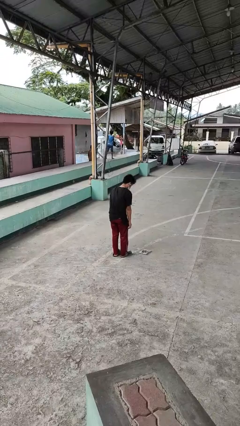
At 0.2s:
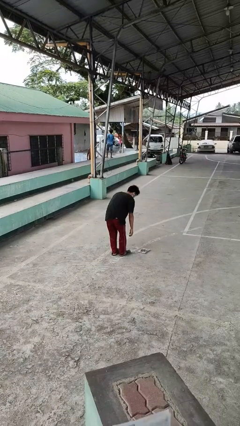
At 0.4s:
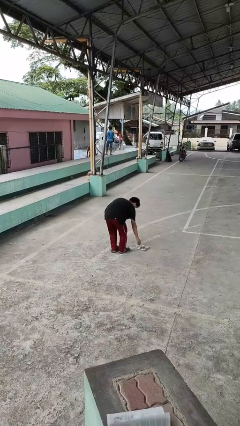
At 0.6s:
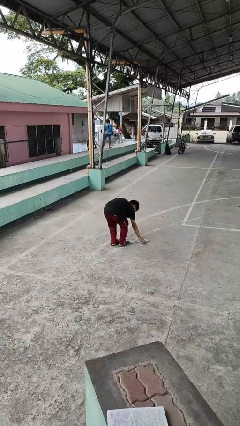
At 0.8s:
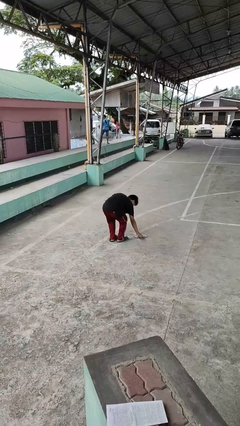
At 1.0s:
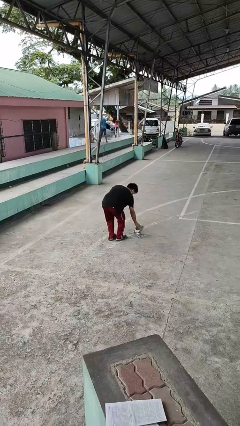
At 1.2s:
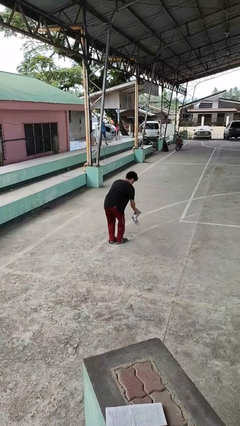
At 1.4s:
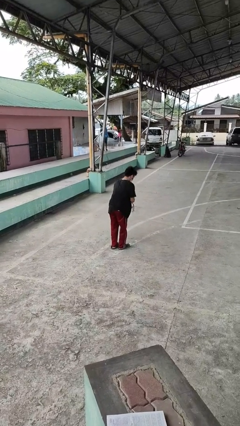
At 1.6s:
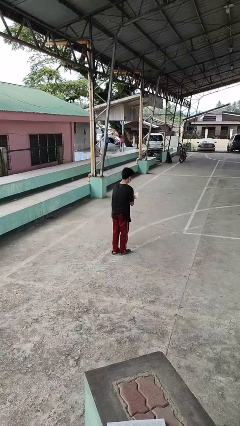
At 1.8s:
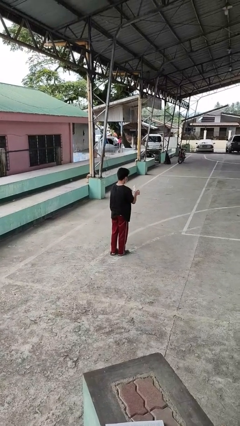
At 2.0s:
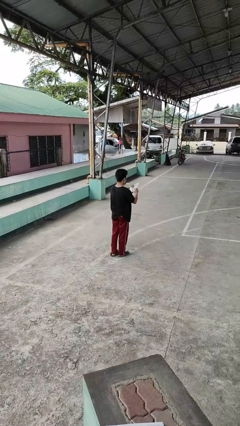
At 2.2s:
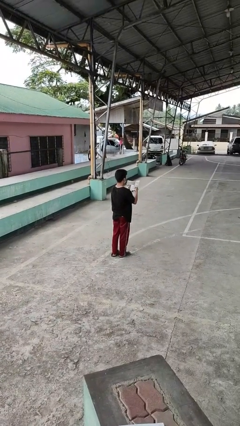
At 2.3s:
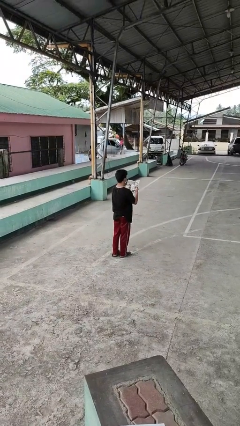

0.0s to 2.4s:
person picks up object from floor

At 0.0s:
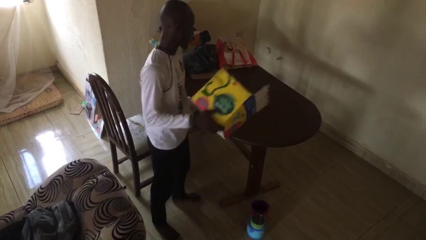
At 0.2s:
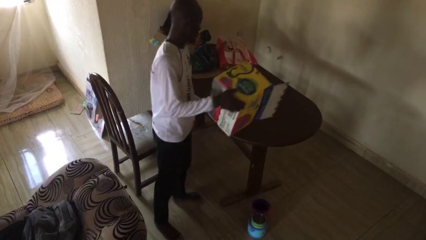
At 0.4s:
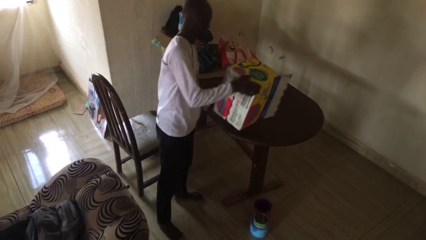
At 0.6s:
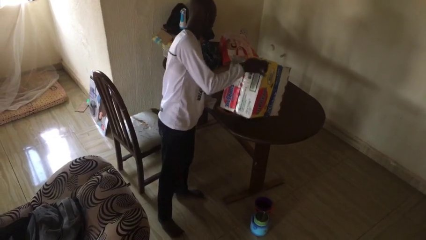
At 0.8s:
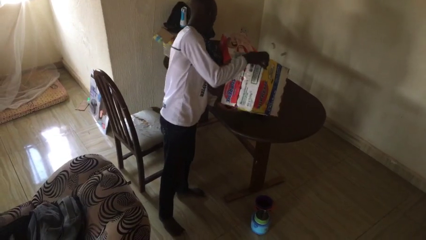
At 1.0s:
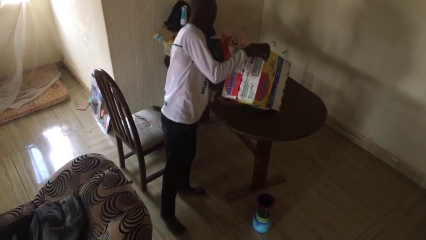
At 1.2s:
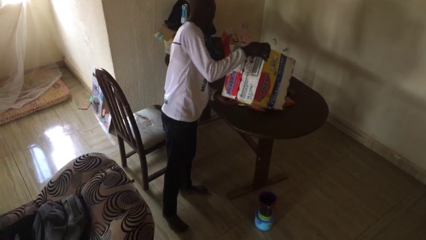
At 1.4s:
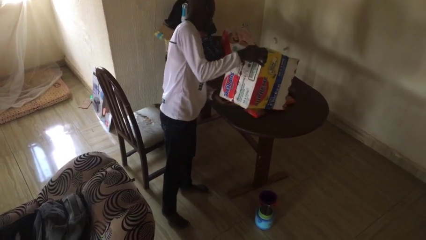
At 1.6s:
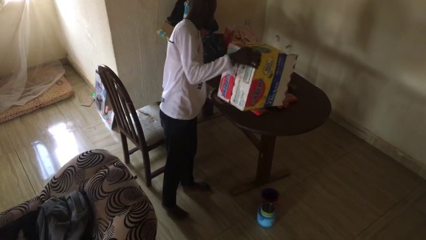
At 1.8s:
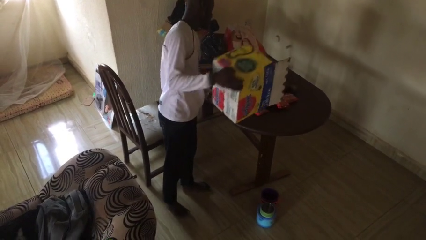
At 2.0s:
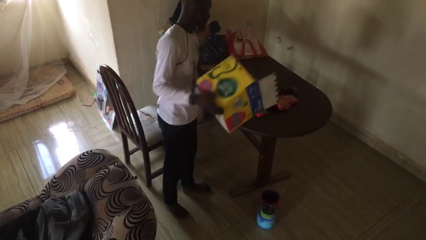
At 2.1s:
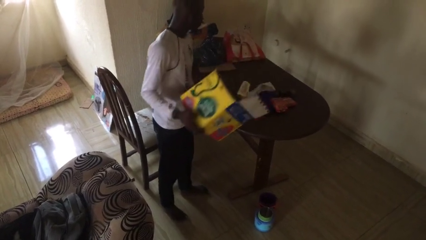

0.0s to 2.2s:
person unloads box onto table

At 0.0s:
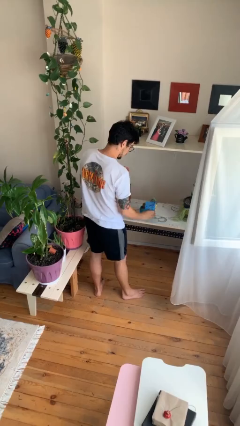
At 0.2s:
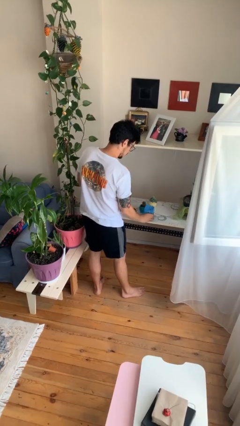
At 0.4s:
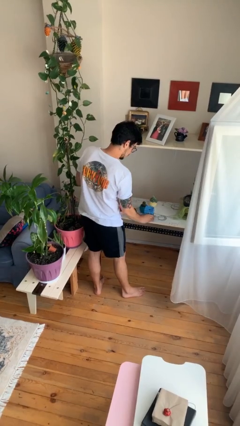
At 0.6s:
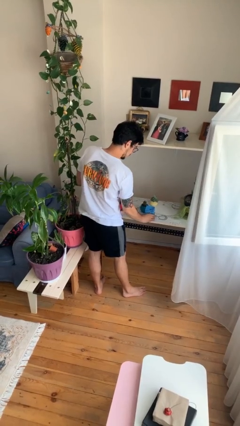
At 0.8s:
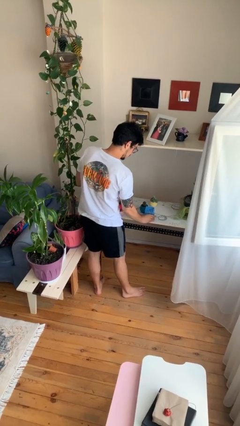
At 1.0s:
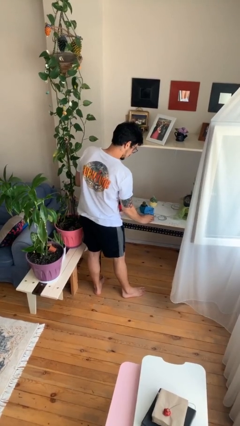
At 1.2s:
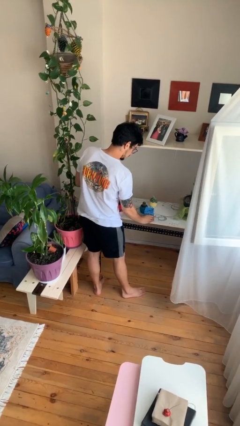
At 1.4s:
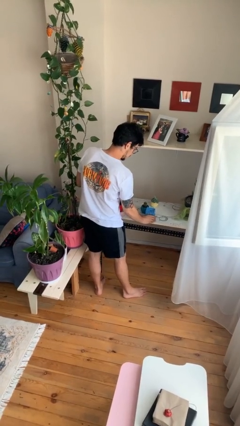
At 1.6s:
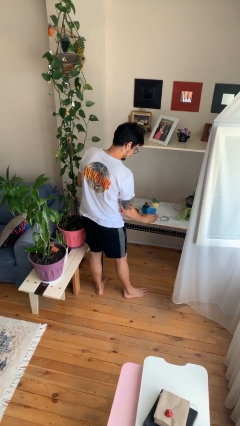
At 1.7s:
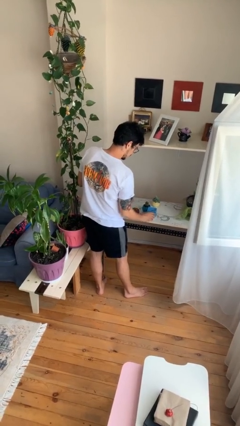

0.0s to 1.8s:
person puts down object on table

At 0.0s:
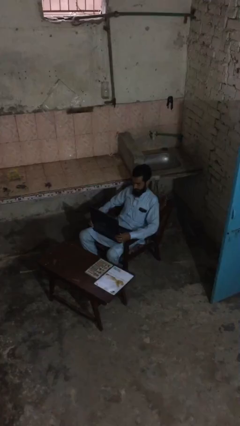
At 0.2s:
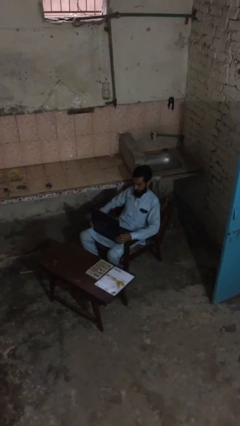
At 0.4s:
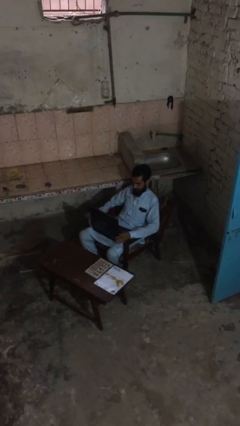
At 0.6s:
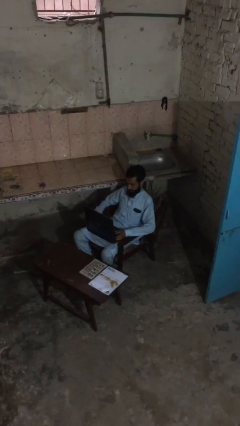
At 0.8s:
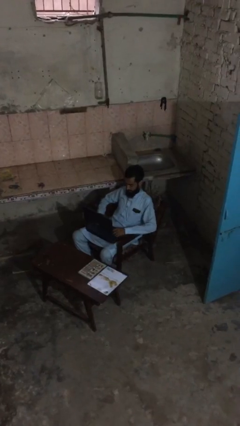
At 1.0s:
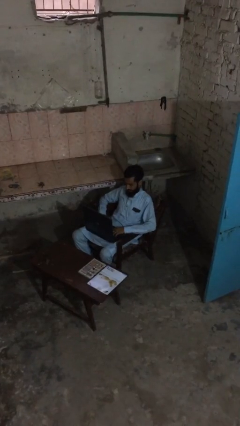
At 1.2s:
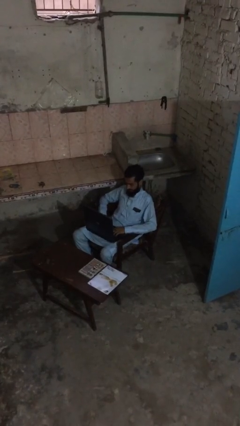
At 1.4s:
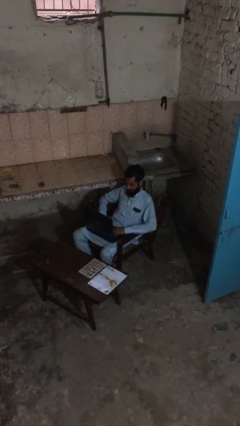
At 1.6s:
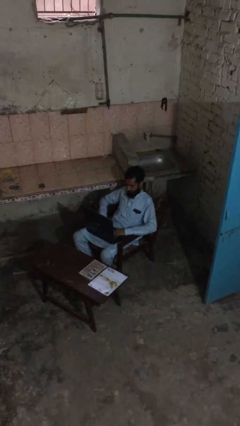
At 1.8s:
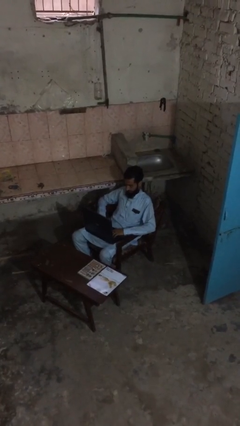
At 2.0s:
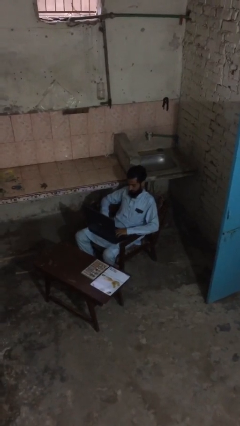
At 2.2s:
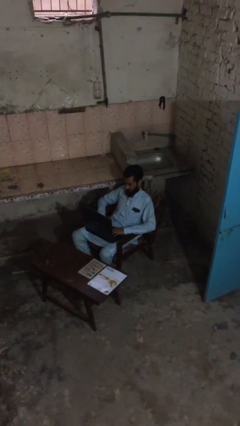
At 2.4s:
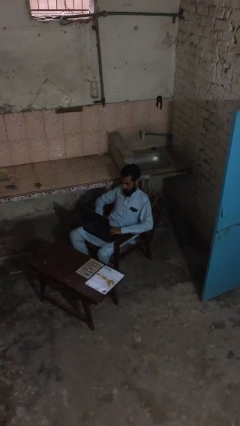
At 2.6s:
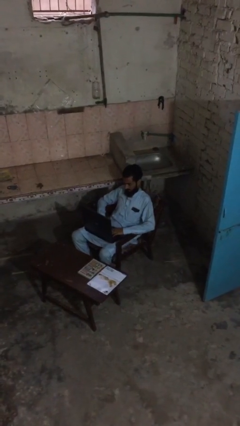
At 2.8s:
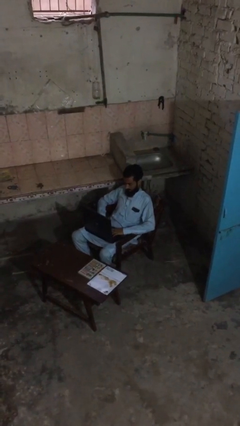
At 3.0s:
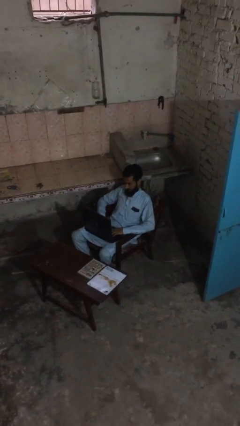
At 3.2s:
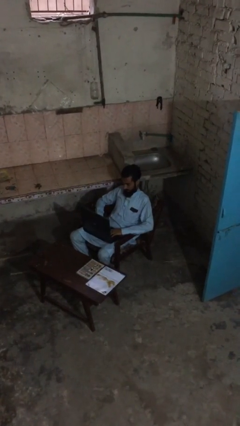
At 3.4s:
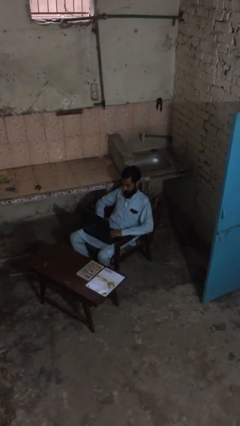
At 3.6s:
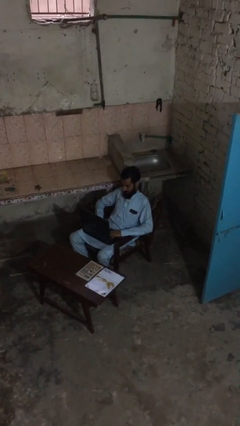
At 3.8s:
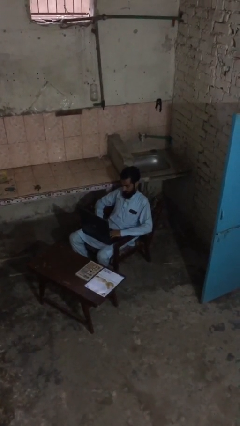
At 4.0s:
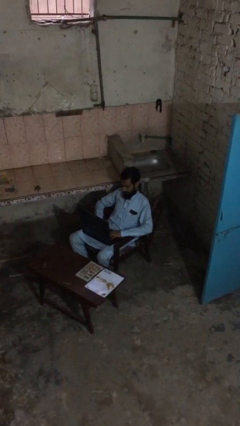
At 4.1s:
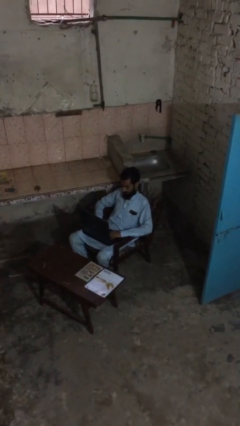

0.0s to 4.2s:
person interacts with laptop

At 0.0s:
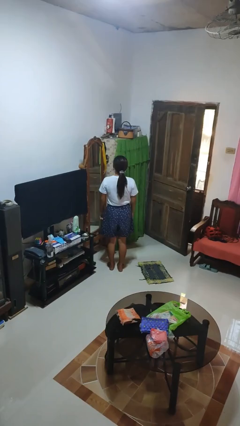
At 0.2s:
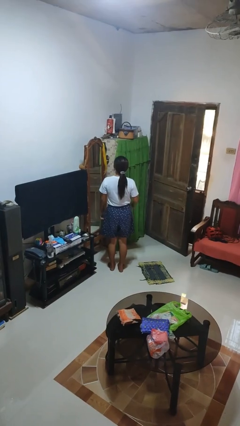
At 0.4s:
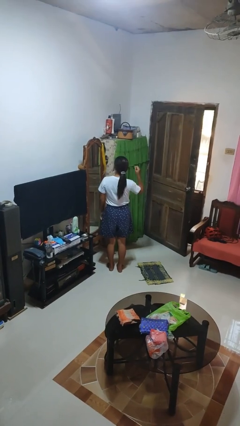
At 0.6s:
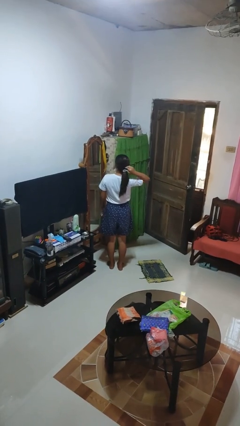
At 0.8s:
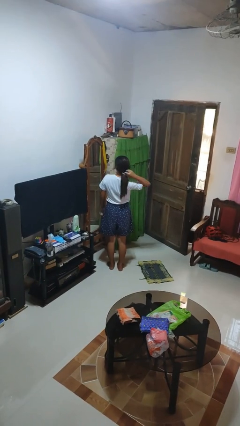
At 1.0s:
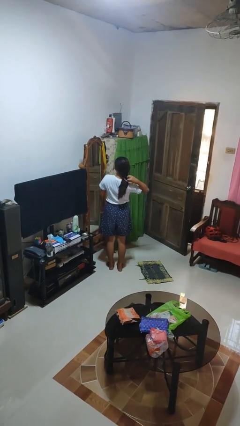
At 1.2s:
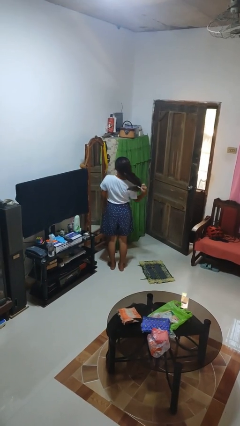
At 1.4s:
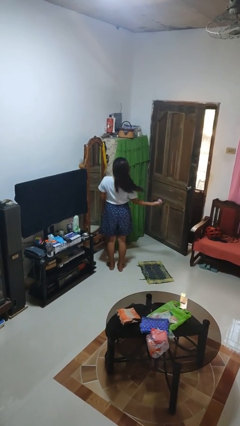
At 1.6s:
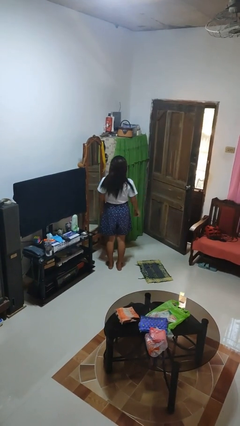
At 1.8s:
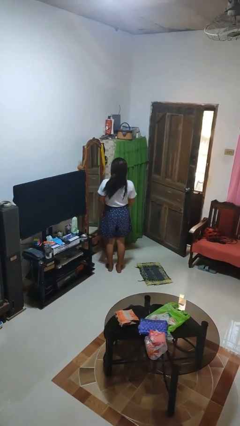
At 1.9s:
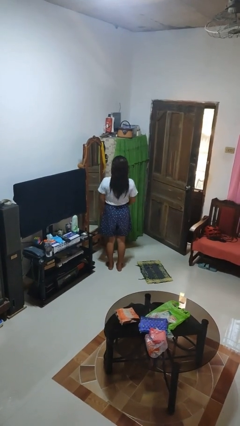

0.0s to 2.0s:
person takes off hairtie

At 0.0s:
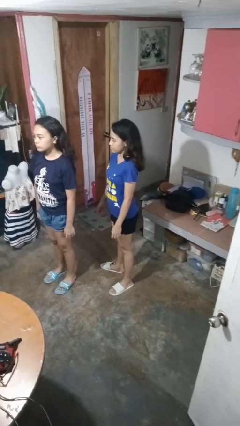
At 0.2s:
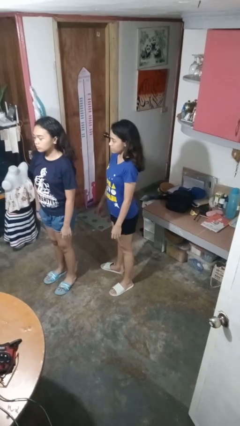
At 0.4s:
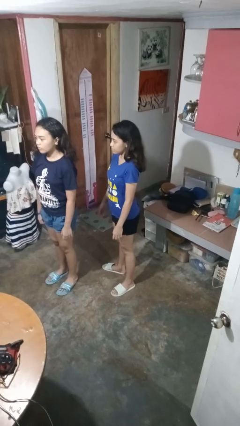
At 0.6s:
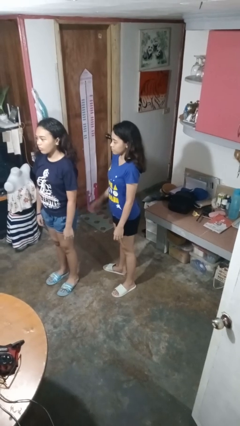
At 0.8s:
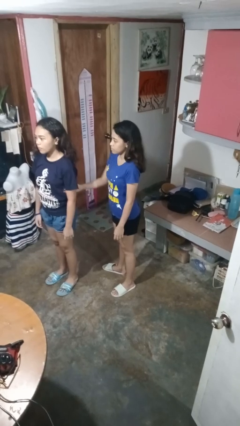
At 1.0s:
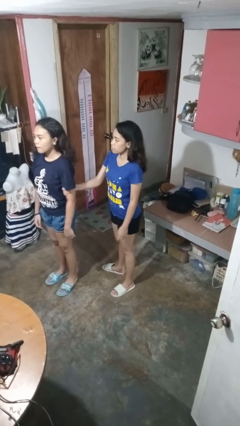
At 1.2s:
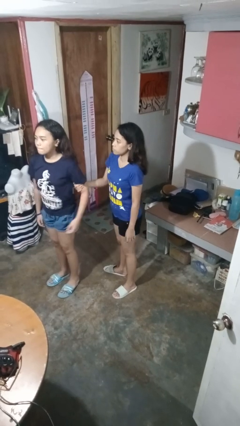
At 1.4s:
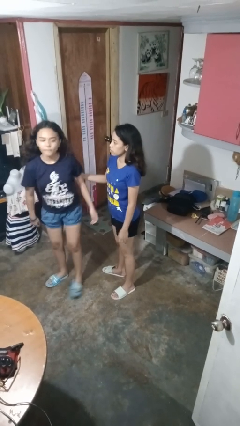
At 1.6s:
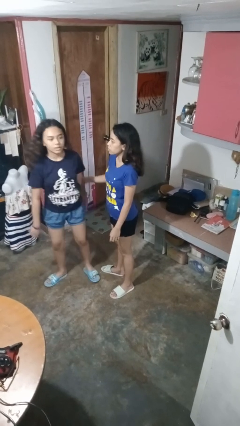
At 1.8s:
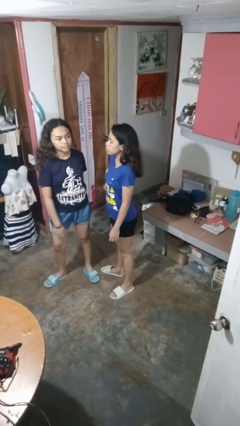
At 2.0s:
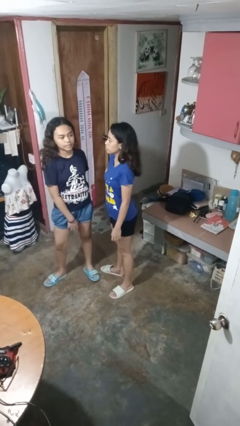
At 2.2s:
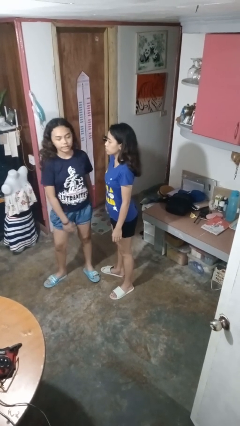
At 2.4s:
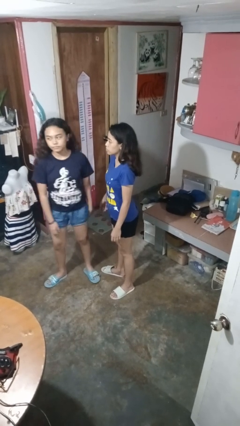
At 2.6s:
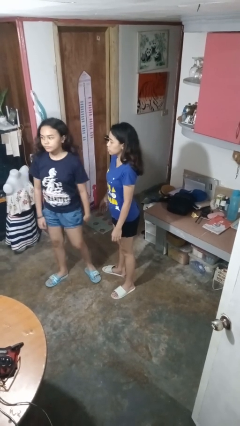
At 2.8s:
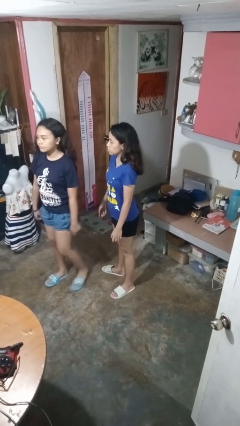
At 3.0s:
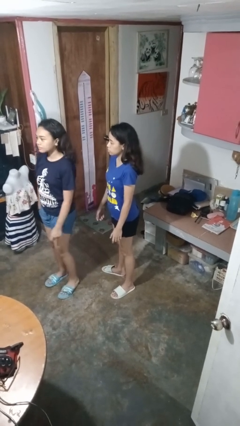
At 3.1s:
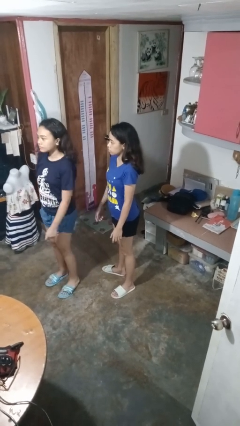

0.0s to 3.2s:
person grabs person by bicep

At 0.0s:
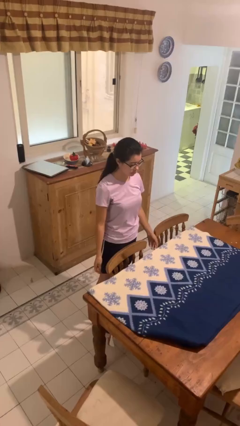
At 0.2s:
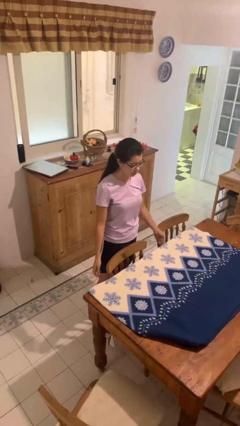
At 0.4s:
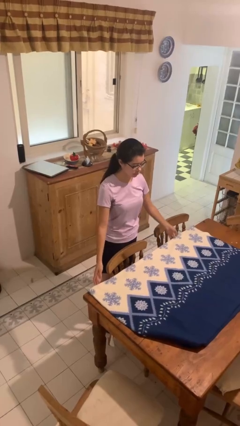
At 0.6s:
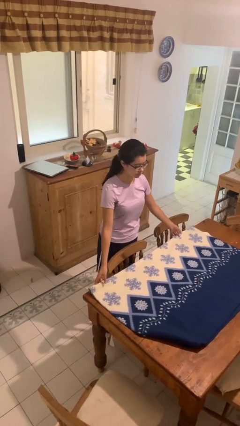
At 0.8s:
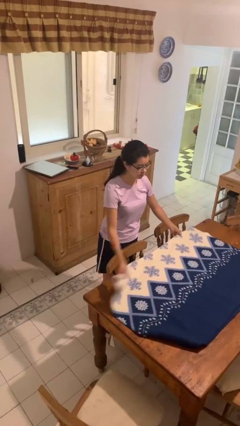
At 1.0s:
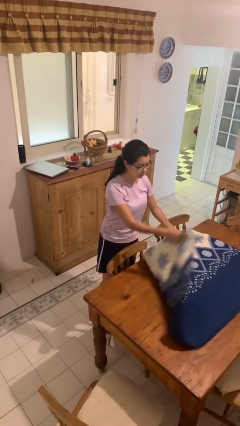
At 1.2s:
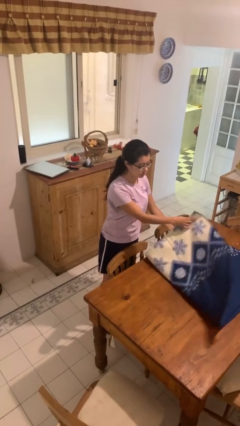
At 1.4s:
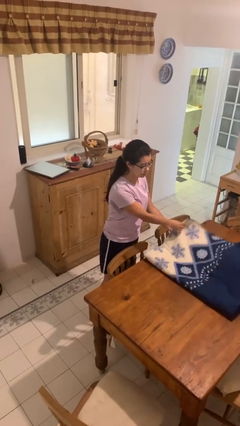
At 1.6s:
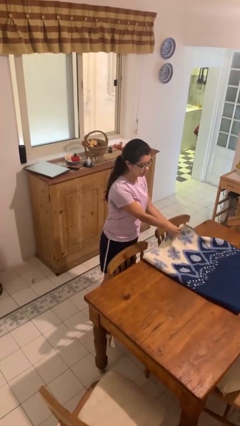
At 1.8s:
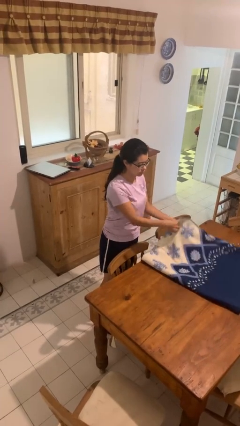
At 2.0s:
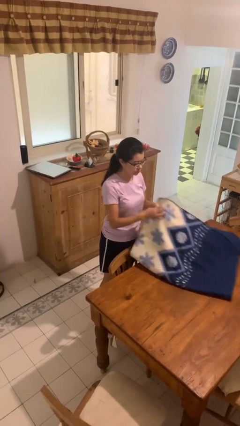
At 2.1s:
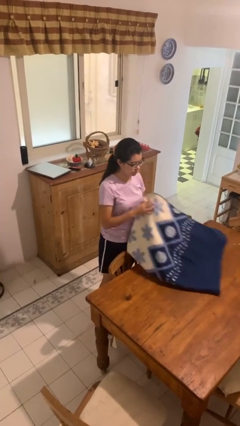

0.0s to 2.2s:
person folds tablecloth
